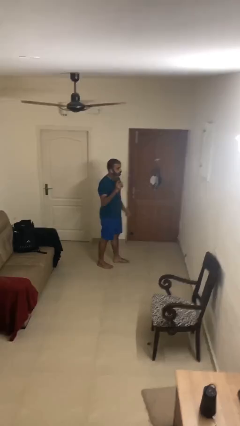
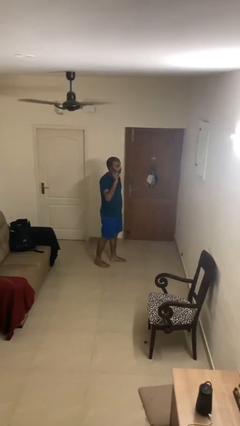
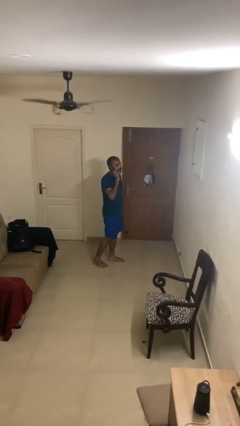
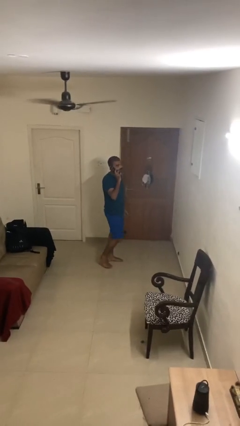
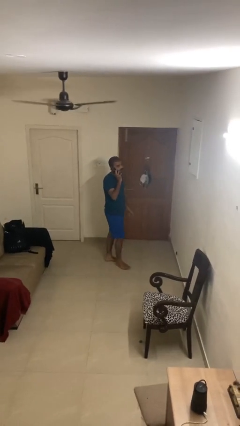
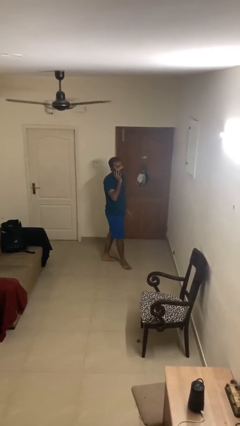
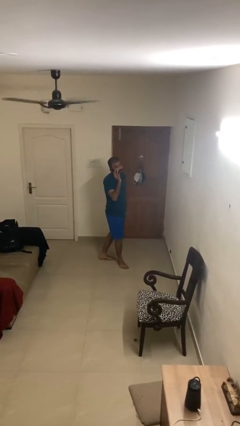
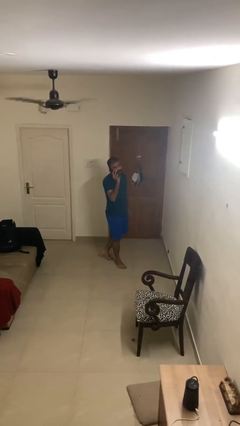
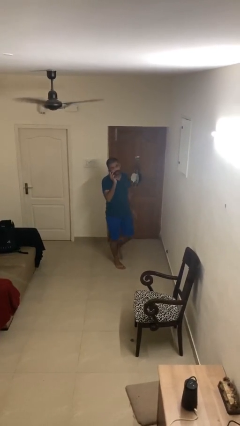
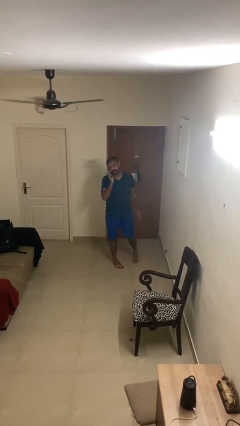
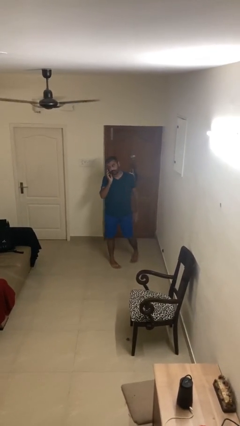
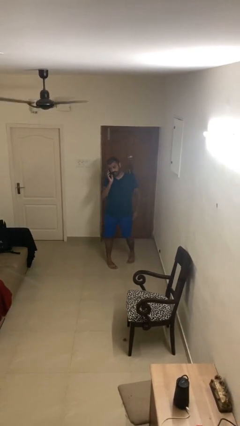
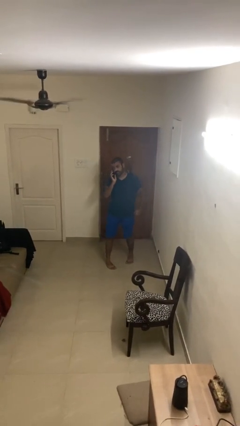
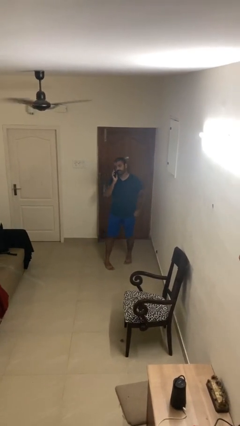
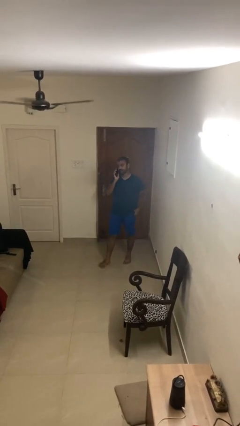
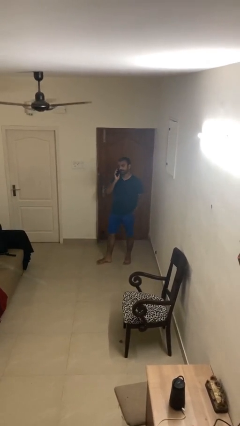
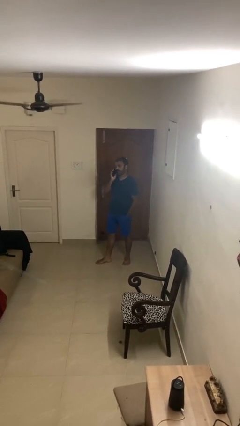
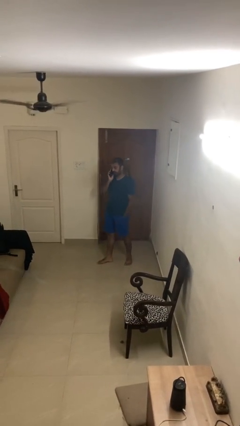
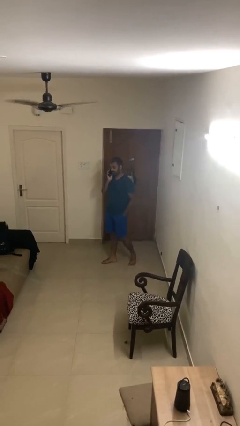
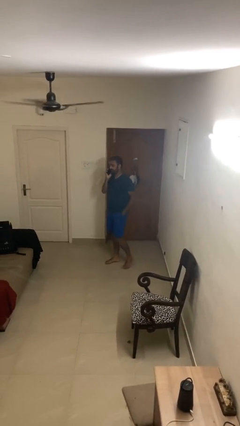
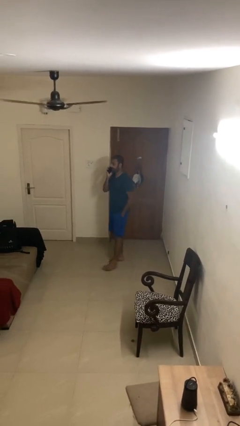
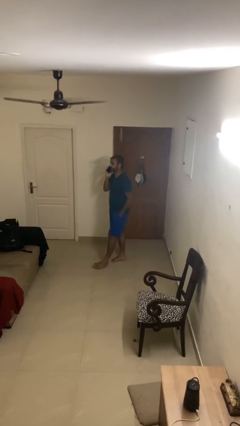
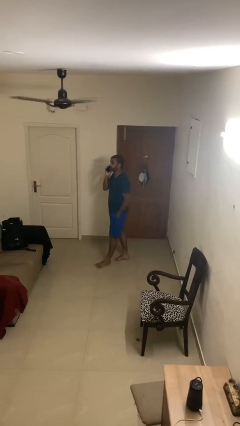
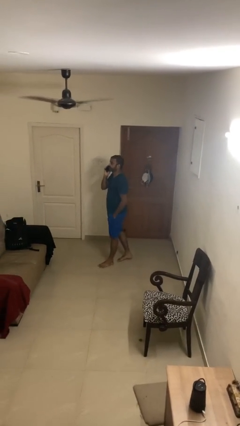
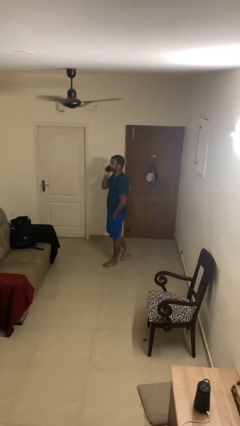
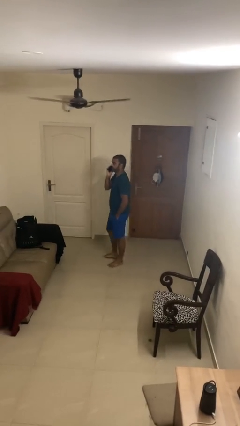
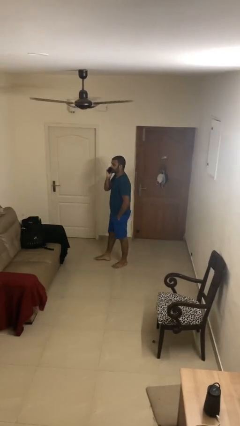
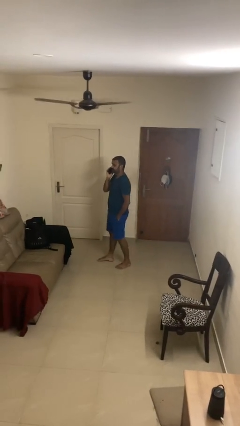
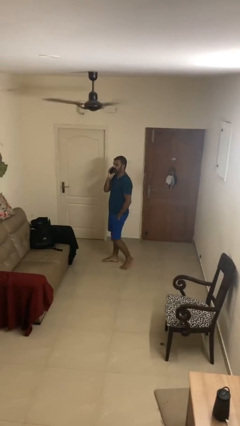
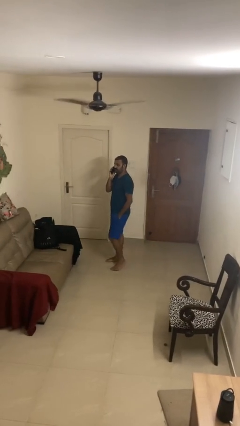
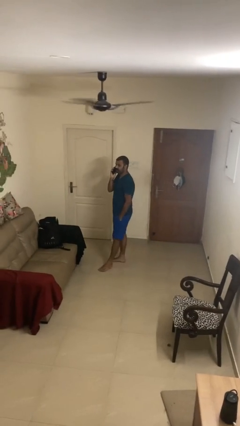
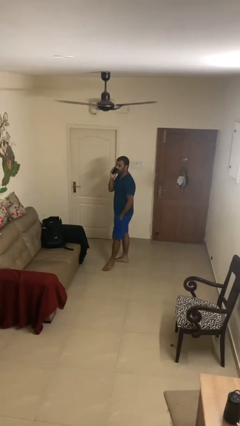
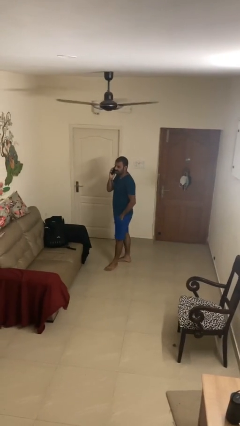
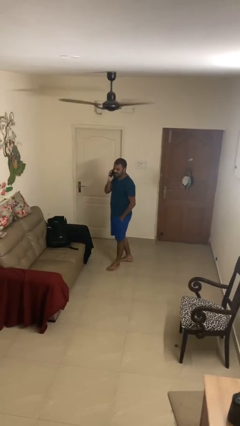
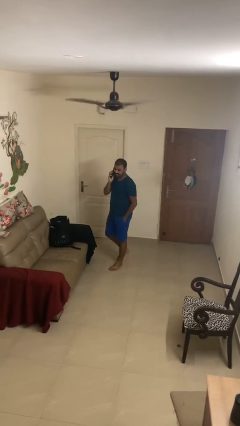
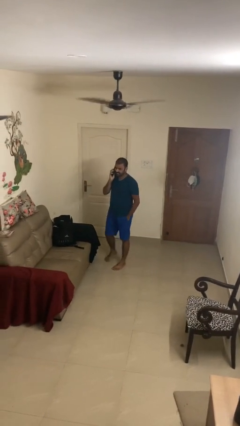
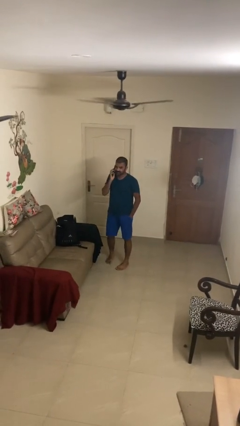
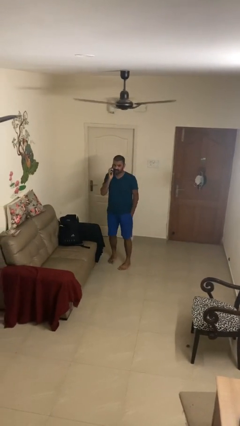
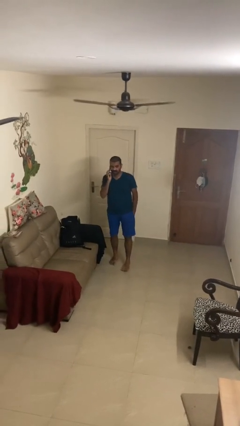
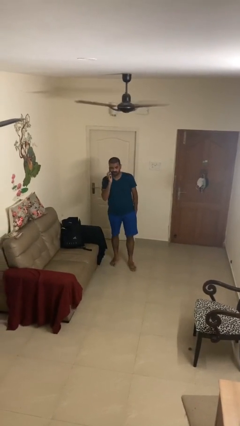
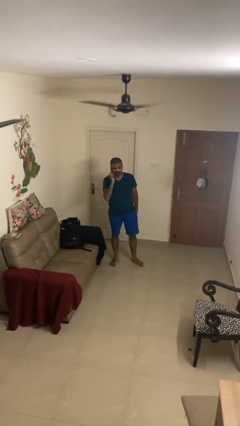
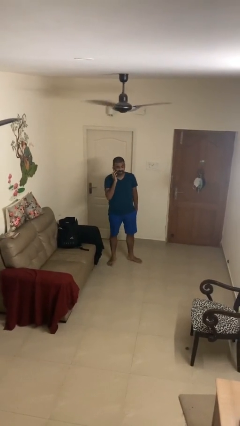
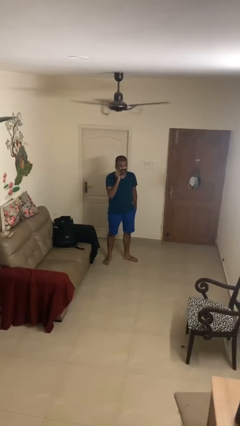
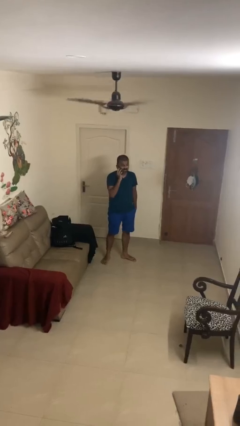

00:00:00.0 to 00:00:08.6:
person talks on phone

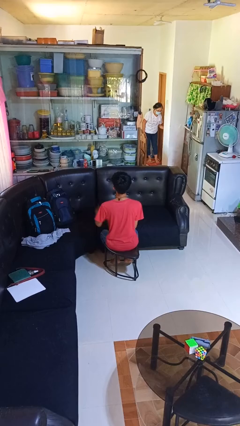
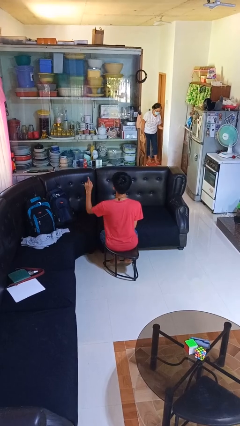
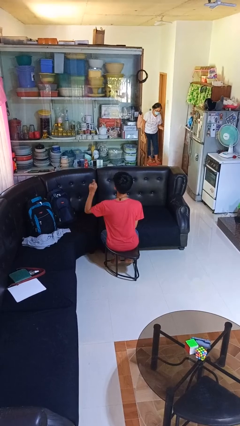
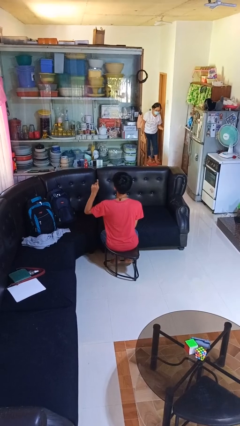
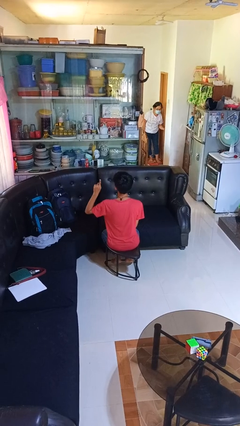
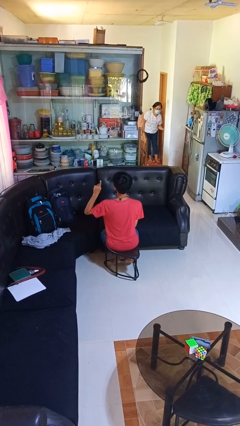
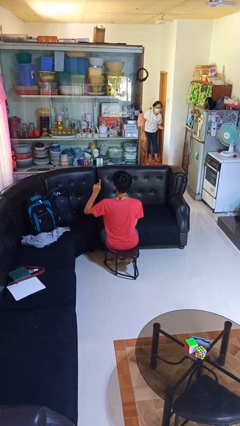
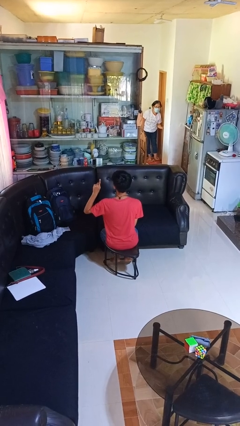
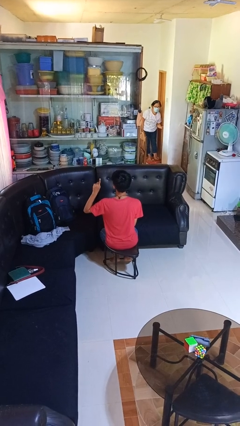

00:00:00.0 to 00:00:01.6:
person gestures number one

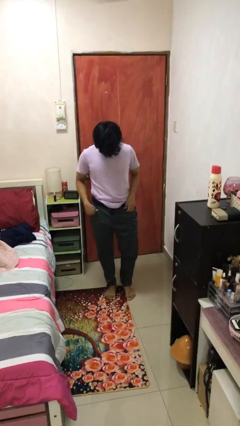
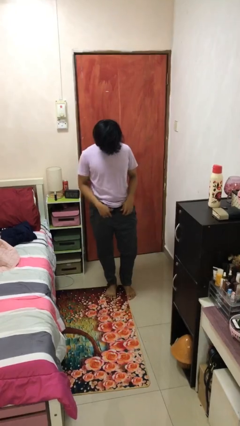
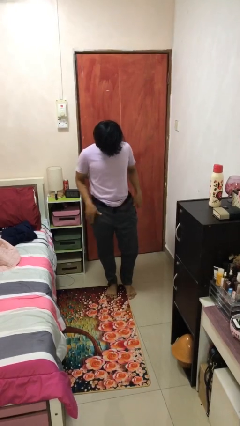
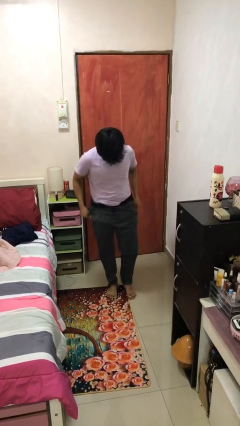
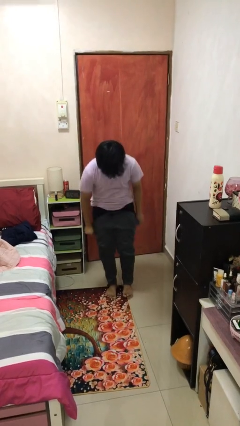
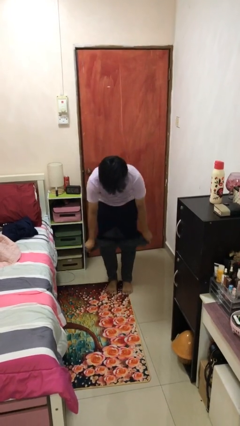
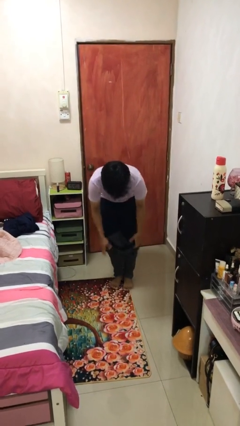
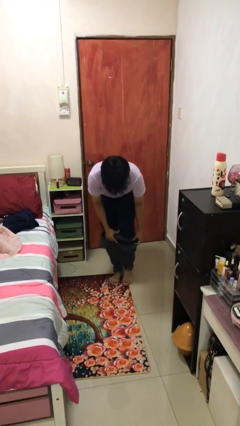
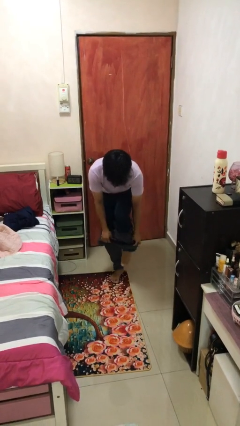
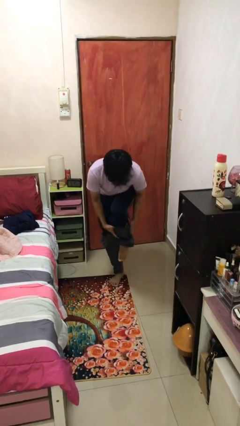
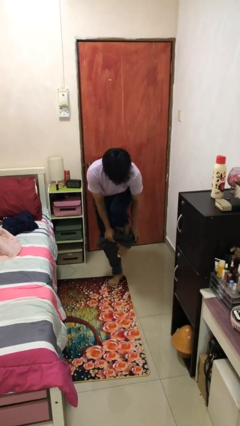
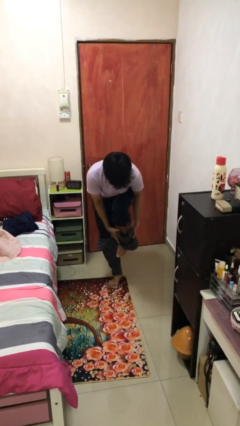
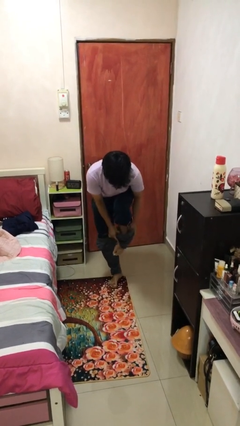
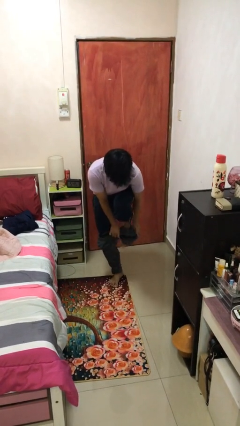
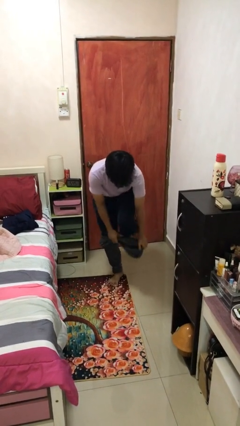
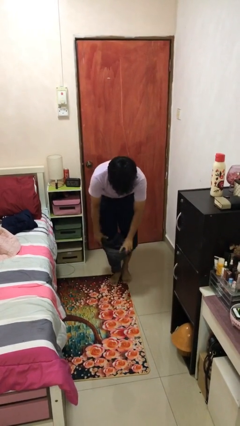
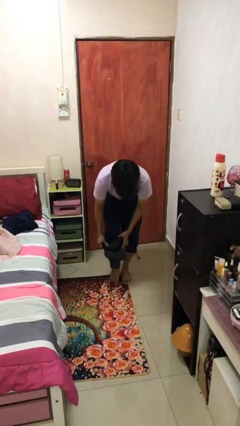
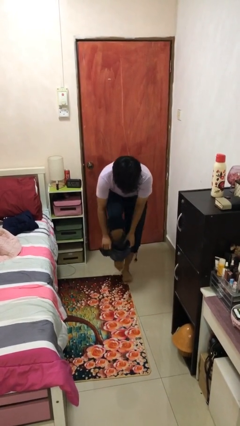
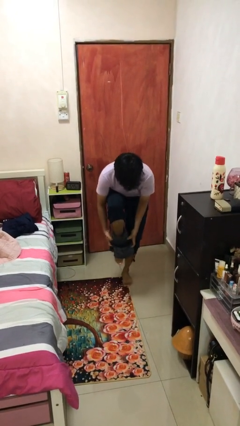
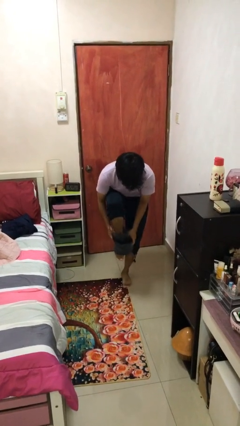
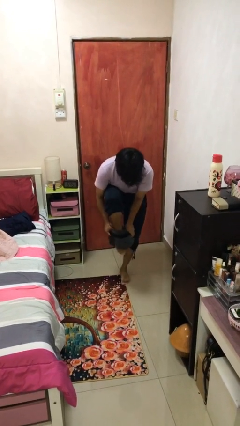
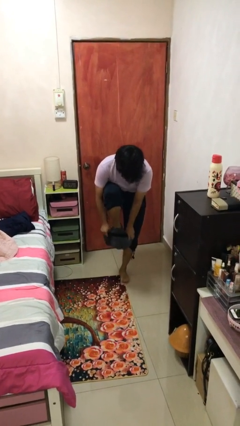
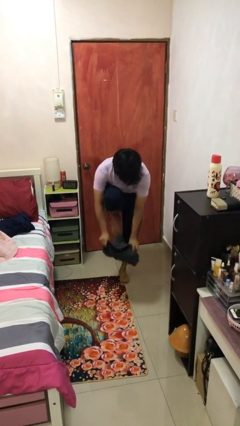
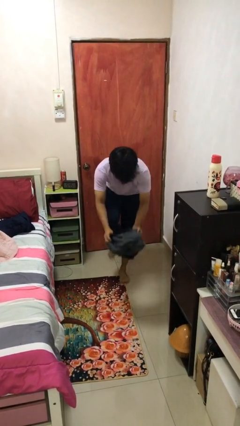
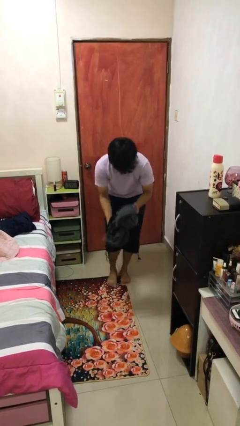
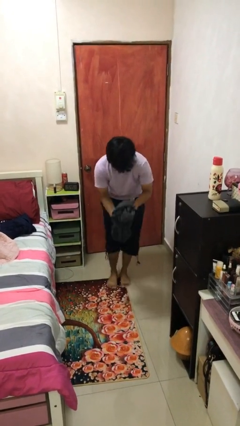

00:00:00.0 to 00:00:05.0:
person takes off pants

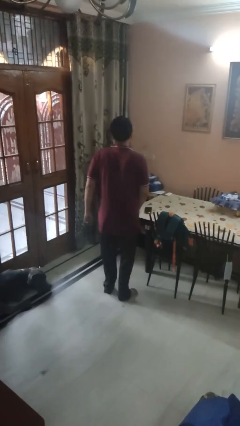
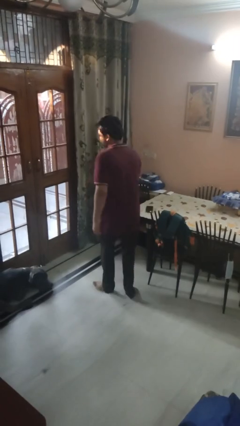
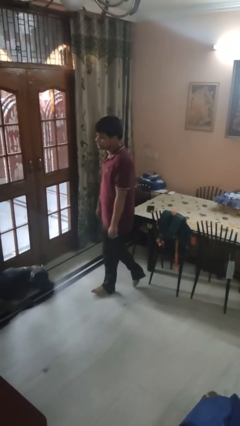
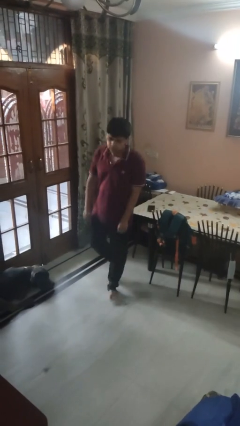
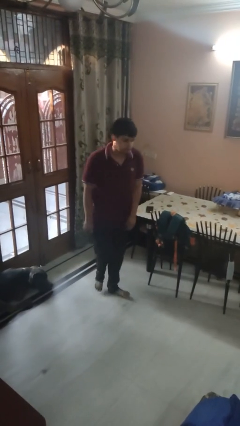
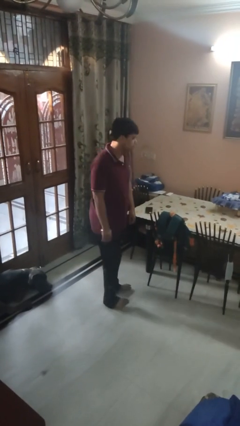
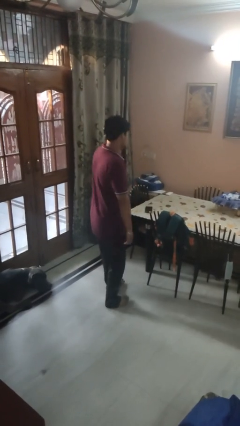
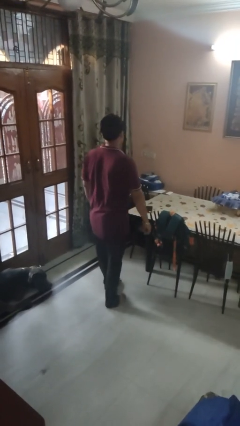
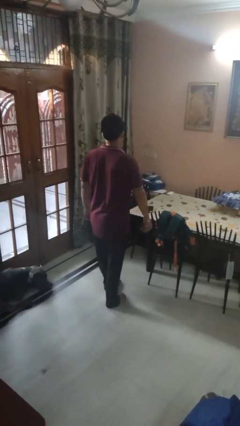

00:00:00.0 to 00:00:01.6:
person twirls

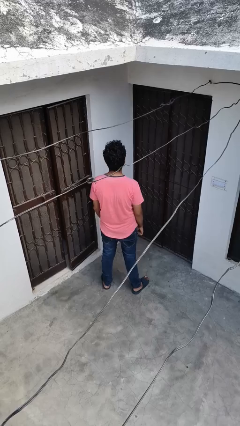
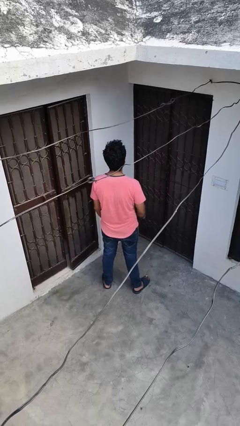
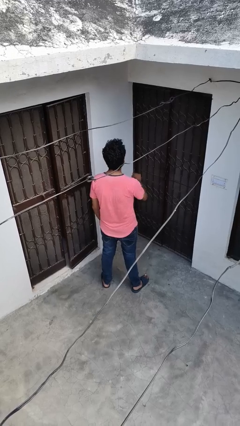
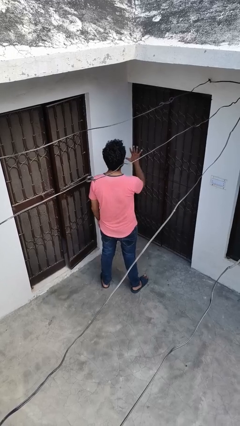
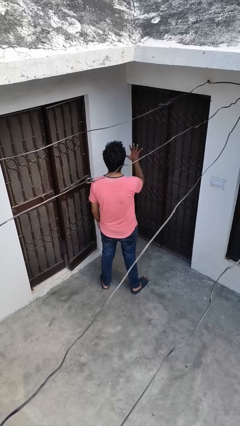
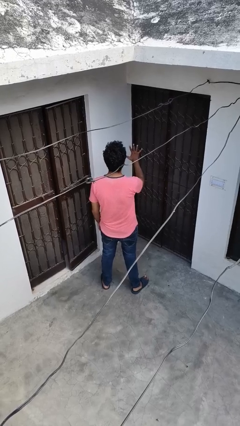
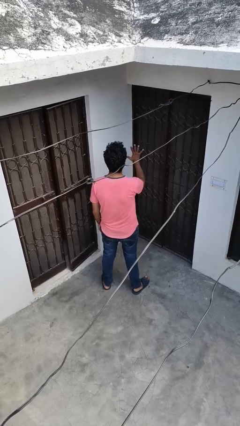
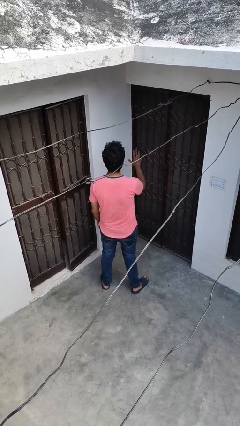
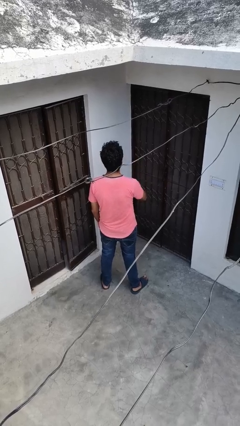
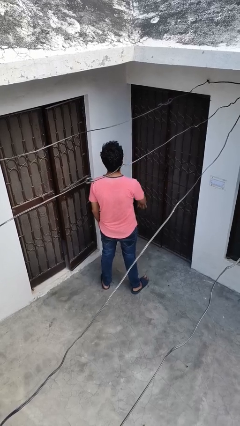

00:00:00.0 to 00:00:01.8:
person gestures number five
